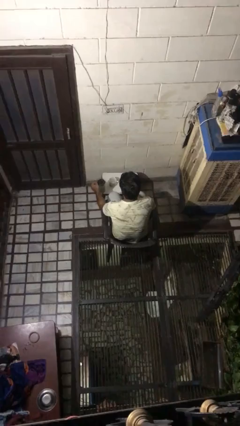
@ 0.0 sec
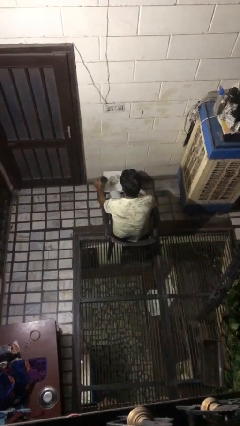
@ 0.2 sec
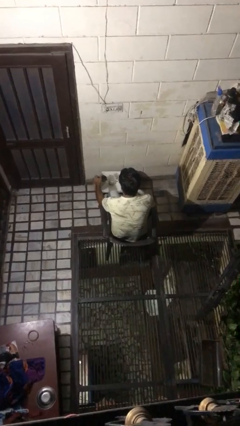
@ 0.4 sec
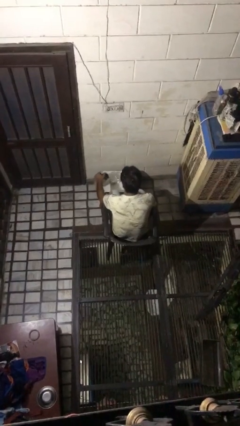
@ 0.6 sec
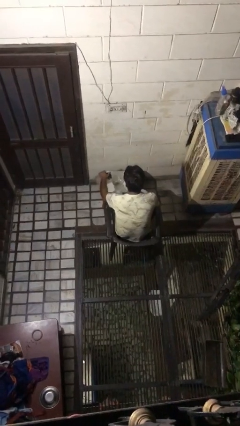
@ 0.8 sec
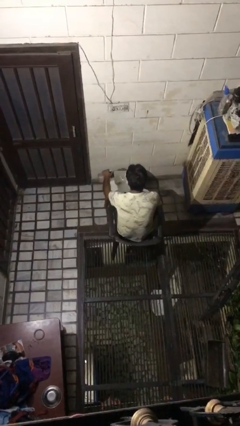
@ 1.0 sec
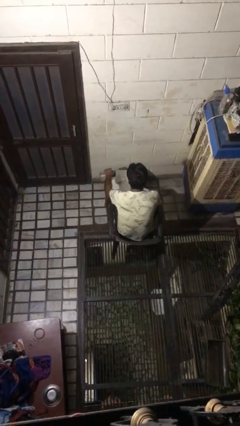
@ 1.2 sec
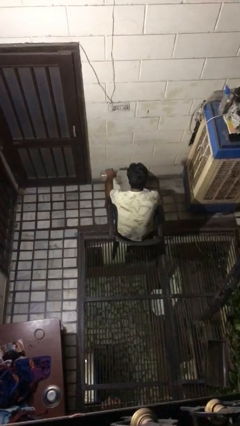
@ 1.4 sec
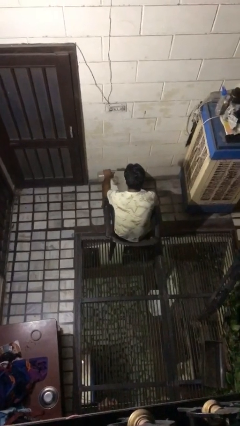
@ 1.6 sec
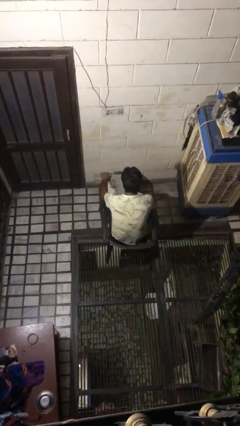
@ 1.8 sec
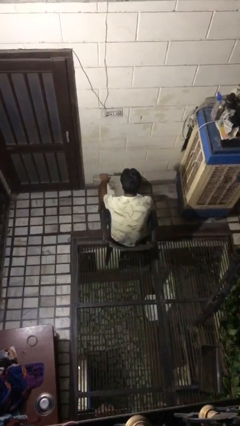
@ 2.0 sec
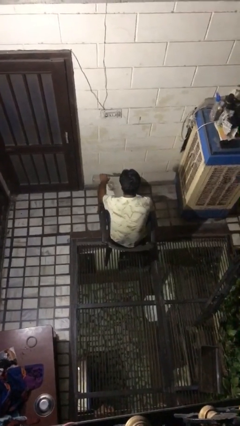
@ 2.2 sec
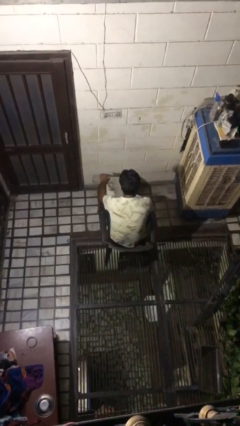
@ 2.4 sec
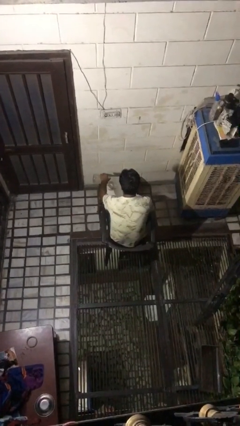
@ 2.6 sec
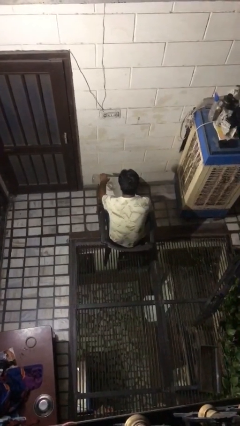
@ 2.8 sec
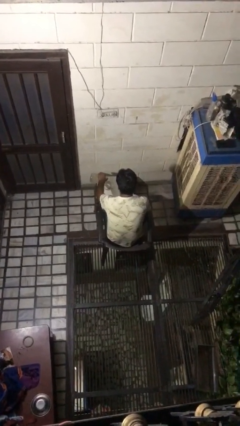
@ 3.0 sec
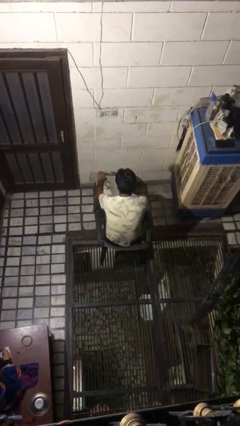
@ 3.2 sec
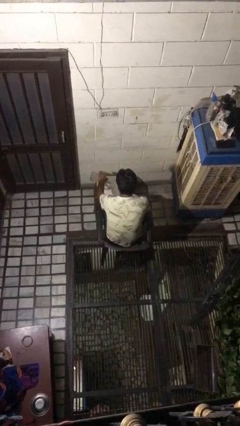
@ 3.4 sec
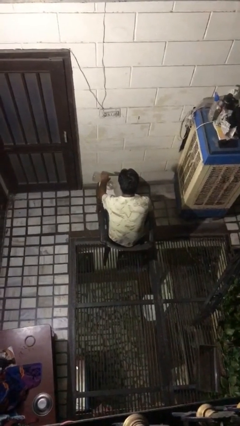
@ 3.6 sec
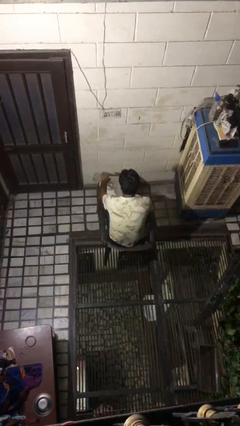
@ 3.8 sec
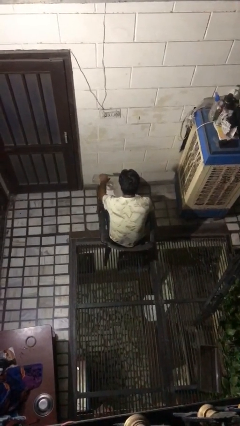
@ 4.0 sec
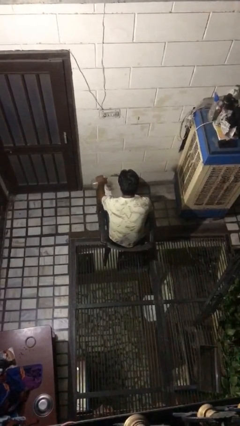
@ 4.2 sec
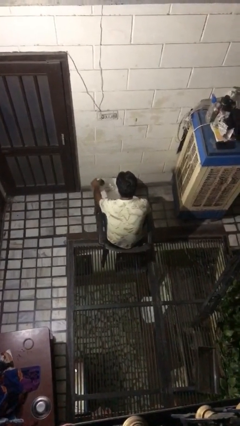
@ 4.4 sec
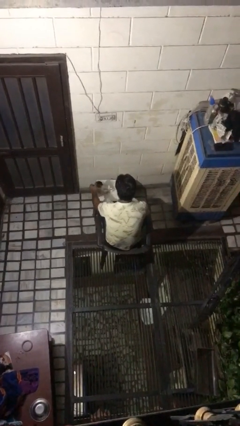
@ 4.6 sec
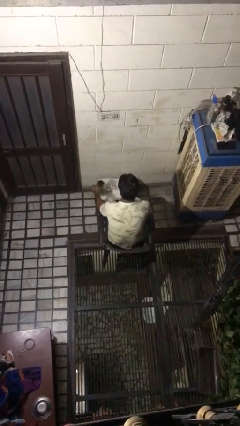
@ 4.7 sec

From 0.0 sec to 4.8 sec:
person pours coffee into mug

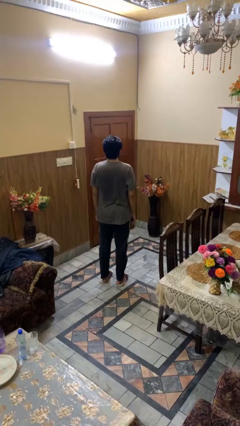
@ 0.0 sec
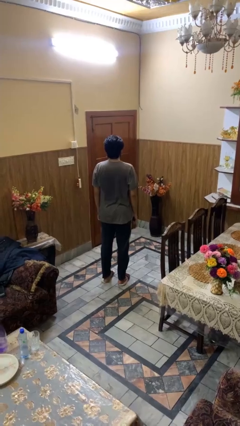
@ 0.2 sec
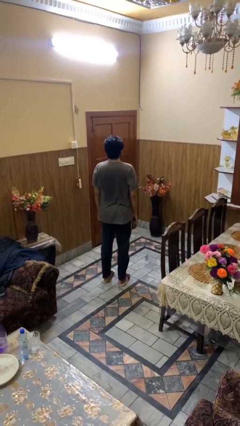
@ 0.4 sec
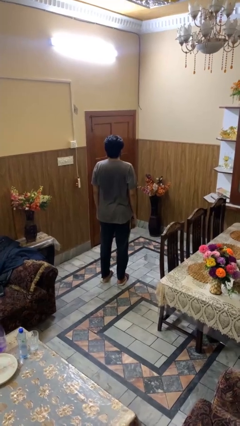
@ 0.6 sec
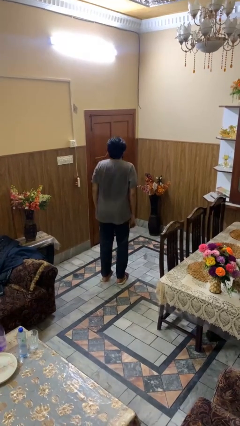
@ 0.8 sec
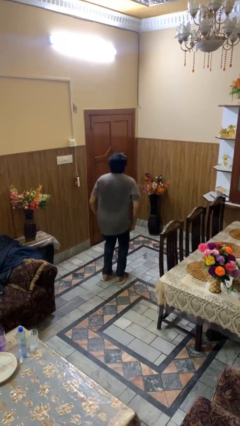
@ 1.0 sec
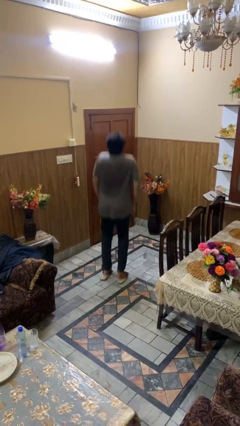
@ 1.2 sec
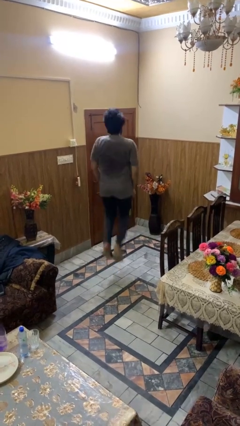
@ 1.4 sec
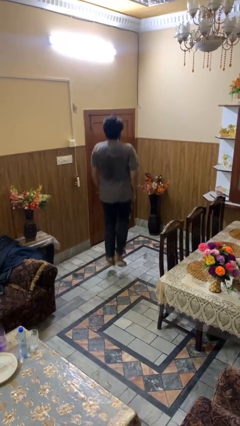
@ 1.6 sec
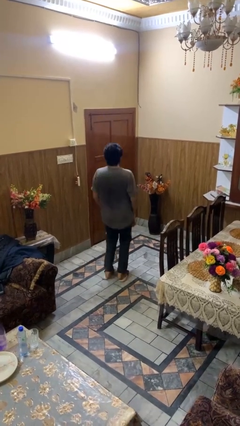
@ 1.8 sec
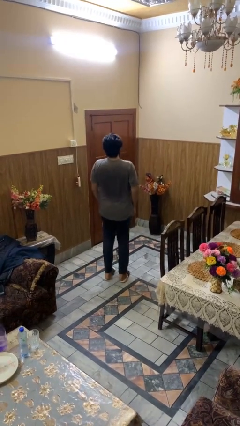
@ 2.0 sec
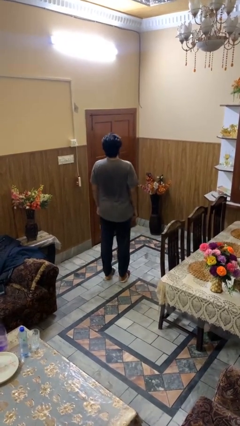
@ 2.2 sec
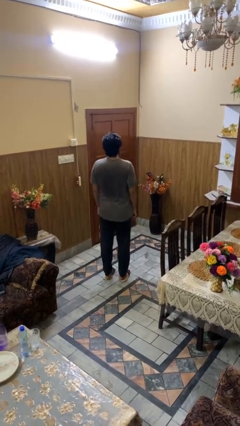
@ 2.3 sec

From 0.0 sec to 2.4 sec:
person jumps

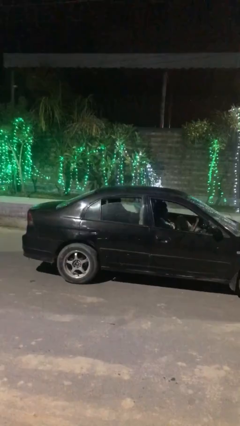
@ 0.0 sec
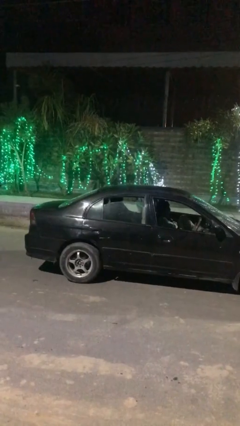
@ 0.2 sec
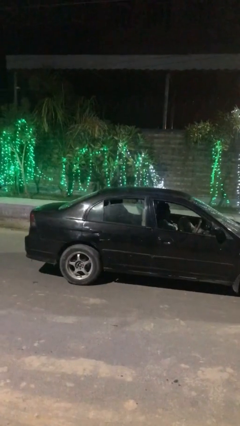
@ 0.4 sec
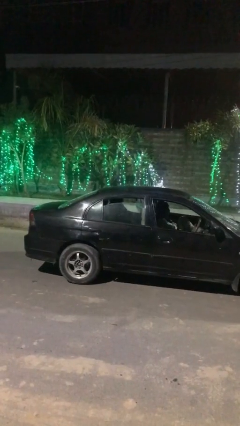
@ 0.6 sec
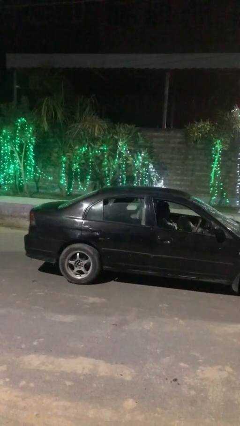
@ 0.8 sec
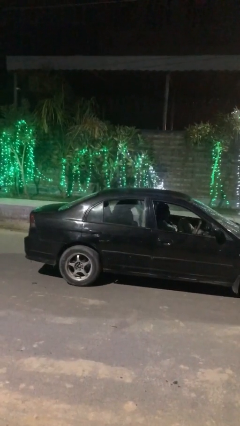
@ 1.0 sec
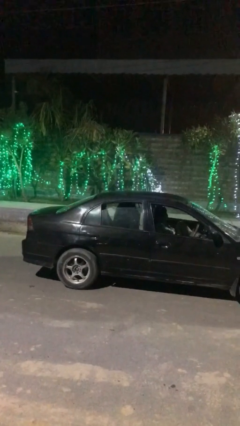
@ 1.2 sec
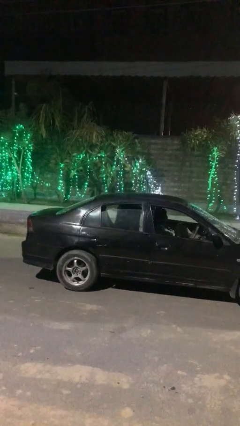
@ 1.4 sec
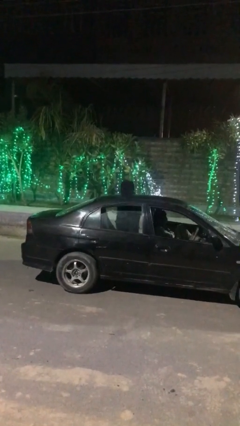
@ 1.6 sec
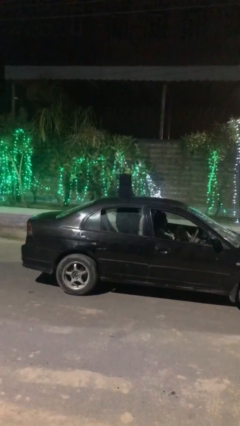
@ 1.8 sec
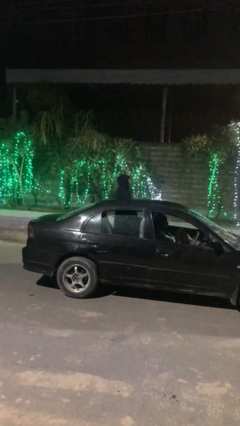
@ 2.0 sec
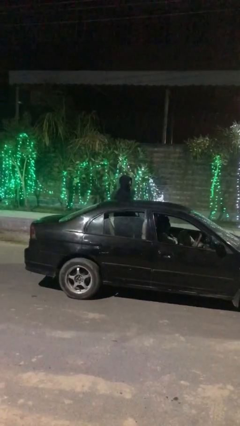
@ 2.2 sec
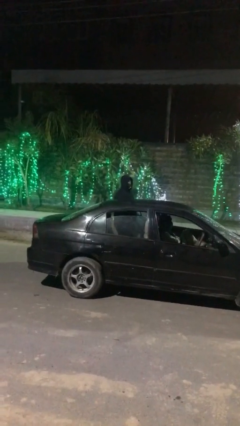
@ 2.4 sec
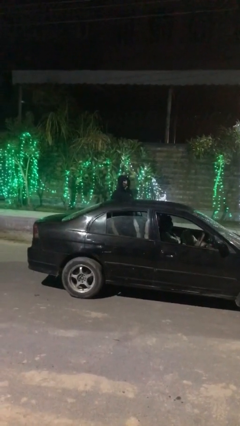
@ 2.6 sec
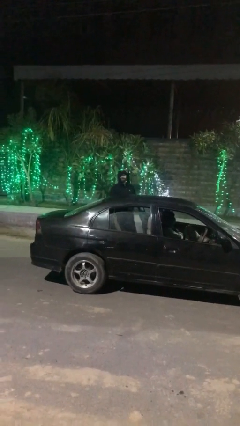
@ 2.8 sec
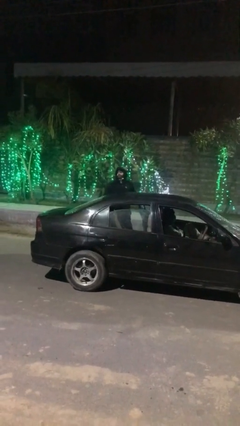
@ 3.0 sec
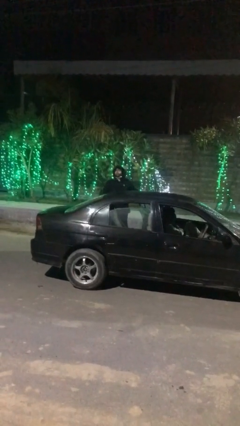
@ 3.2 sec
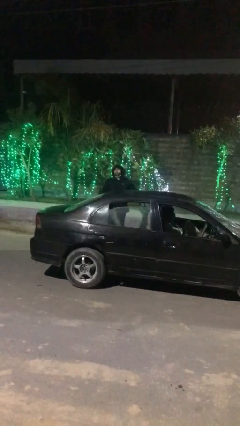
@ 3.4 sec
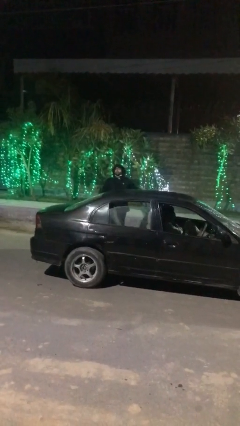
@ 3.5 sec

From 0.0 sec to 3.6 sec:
person exits car

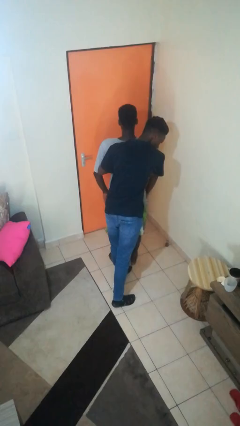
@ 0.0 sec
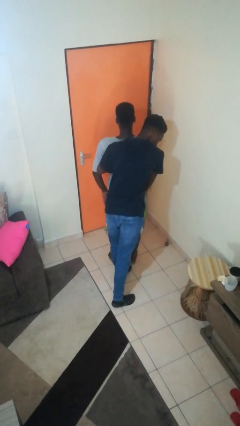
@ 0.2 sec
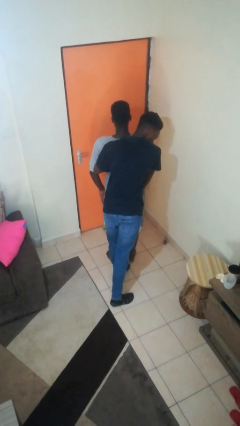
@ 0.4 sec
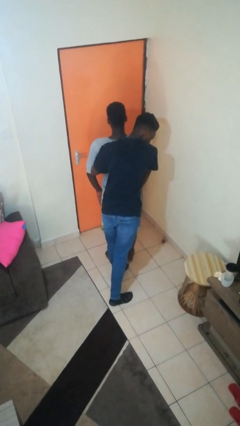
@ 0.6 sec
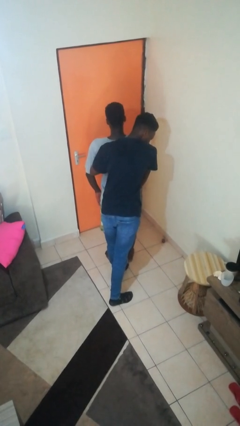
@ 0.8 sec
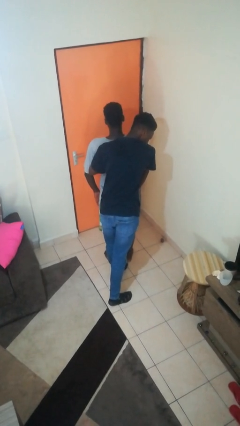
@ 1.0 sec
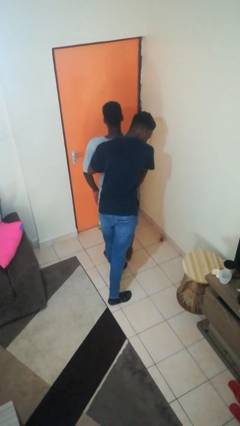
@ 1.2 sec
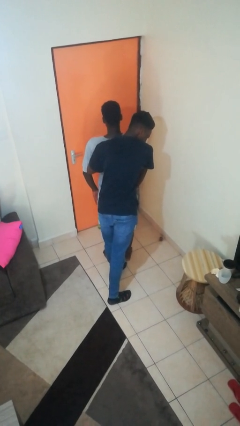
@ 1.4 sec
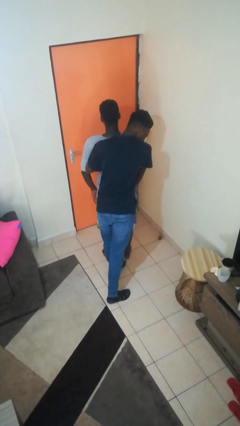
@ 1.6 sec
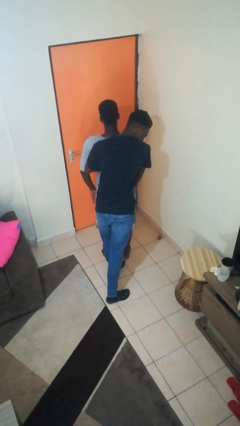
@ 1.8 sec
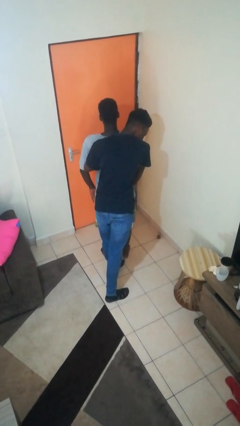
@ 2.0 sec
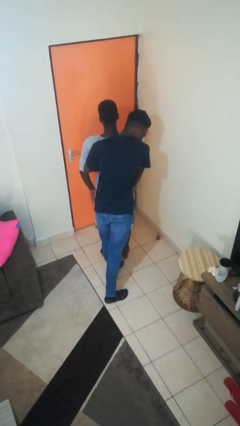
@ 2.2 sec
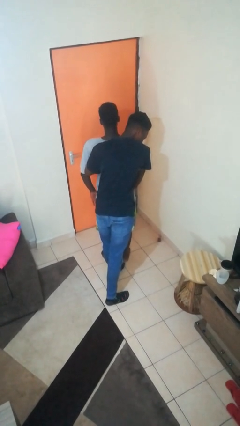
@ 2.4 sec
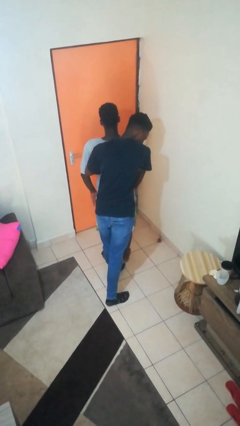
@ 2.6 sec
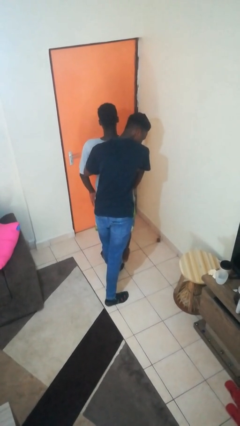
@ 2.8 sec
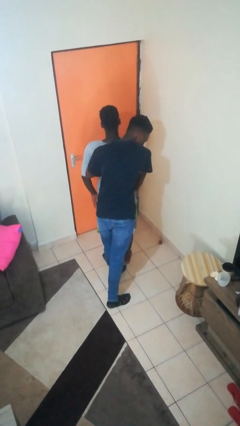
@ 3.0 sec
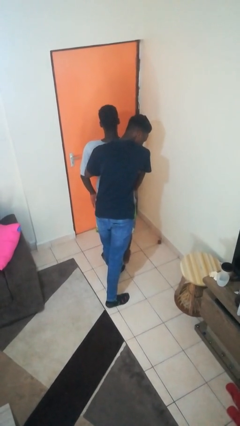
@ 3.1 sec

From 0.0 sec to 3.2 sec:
person hugs person from behind

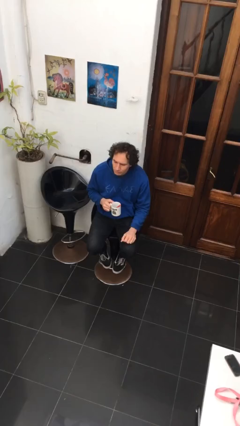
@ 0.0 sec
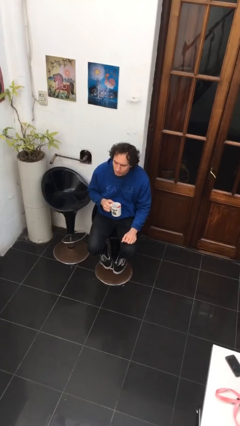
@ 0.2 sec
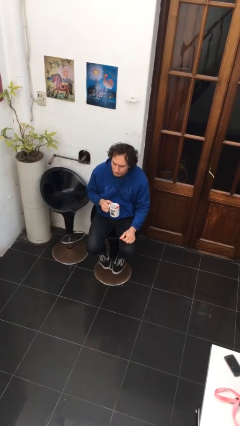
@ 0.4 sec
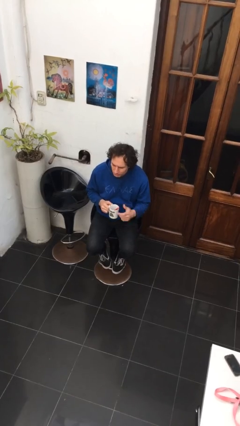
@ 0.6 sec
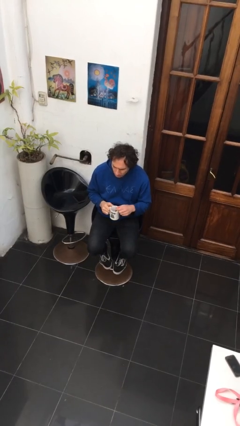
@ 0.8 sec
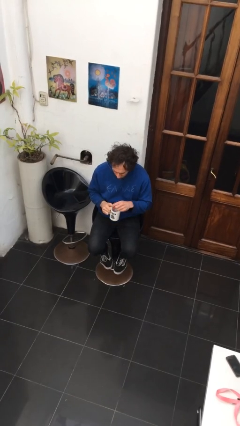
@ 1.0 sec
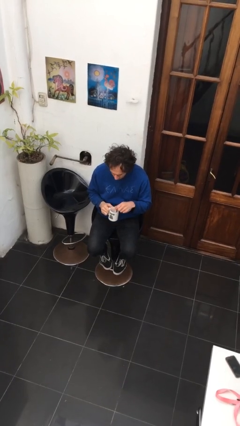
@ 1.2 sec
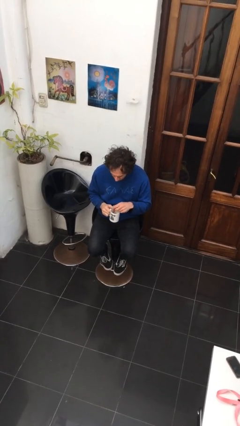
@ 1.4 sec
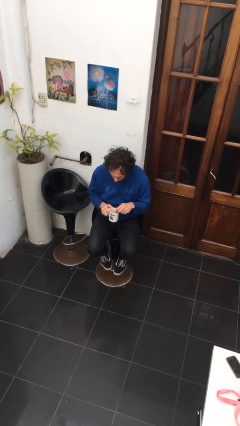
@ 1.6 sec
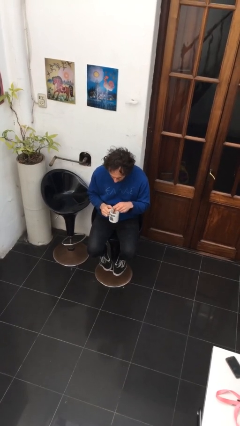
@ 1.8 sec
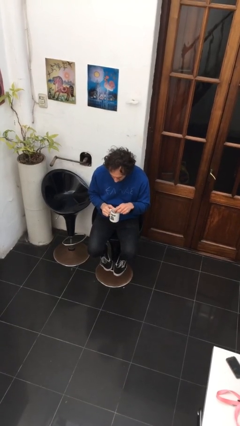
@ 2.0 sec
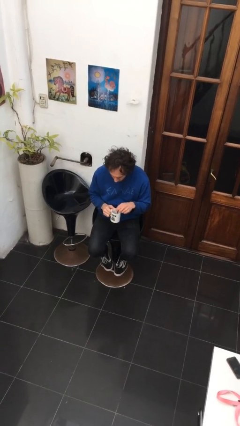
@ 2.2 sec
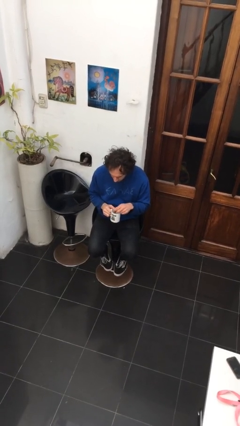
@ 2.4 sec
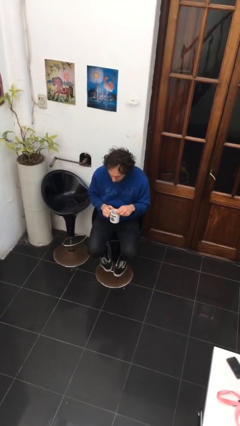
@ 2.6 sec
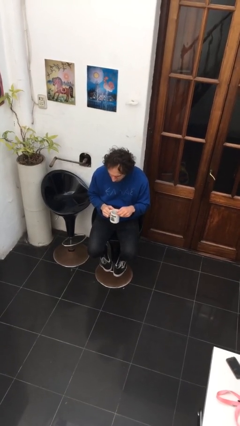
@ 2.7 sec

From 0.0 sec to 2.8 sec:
person stirs mug

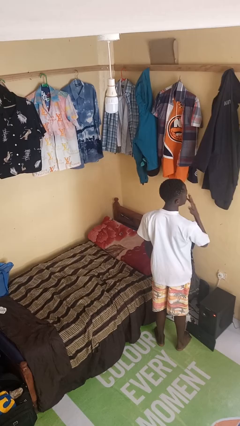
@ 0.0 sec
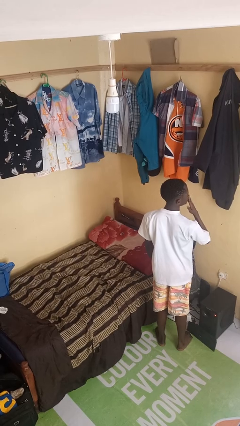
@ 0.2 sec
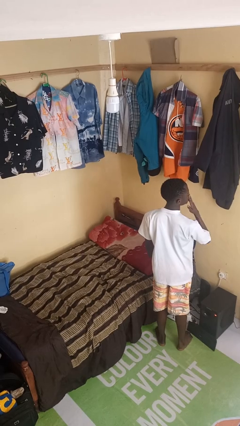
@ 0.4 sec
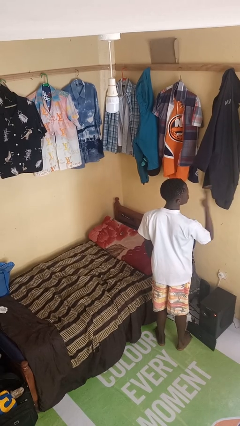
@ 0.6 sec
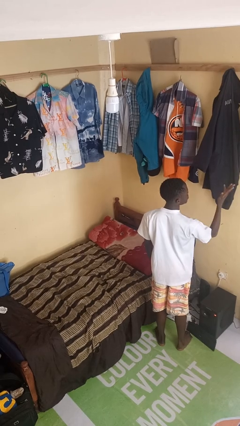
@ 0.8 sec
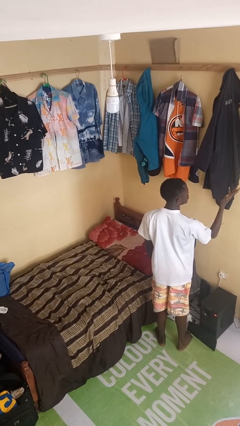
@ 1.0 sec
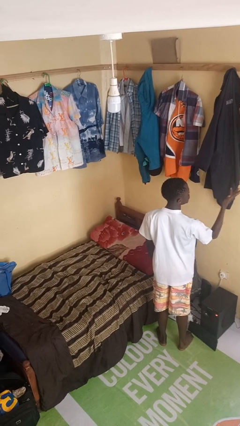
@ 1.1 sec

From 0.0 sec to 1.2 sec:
person gestures blow kiss
